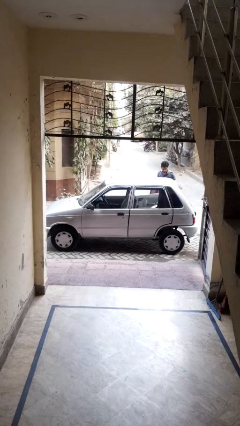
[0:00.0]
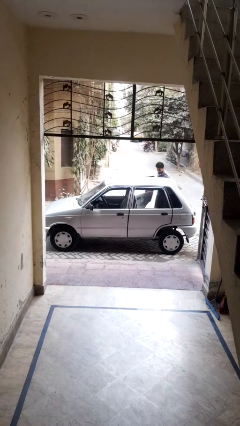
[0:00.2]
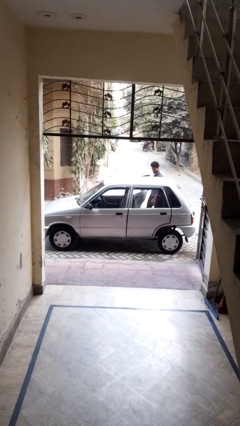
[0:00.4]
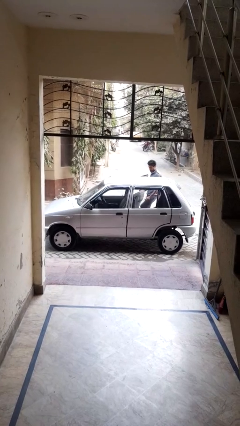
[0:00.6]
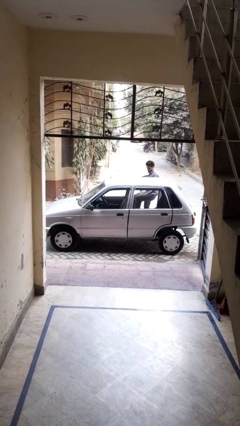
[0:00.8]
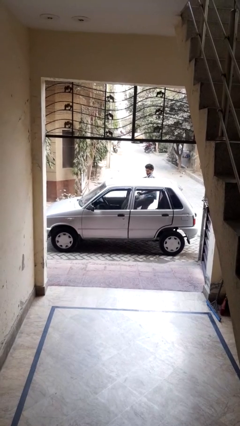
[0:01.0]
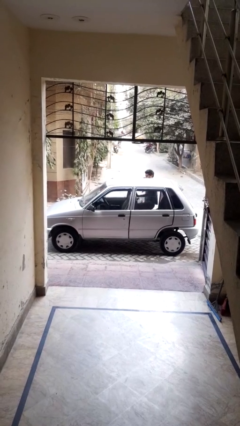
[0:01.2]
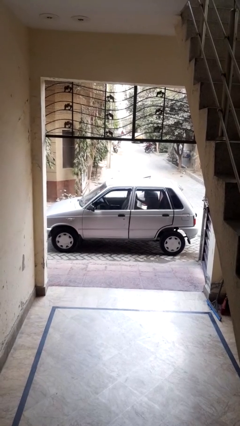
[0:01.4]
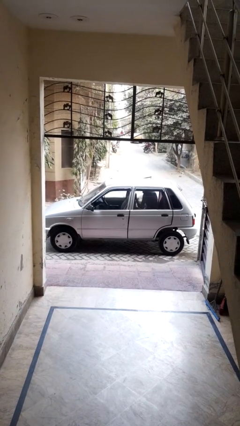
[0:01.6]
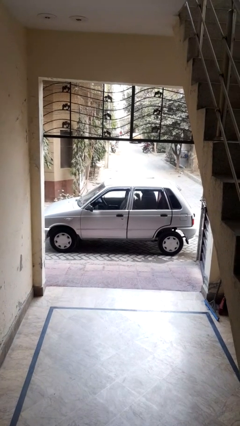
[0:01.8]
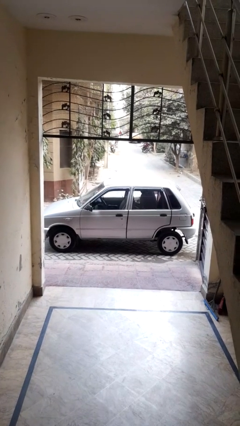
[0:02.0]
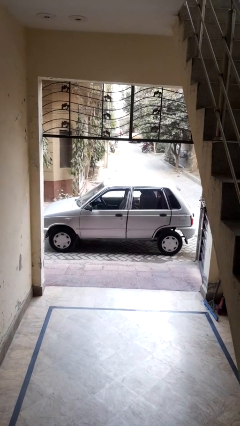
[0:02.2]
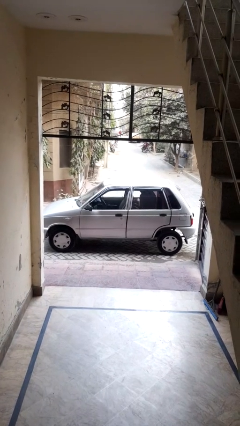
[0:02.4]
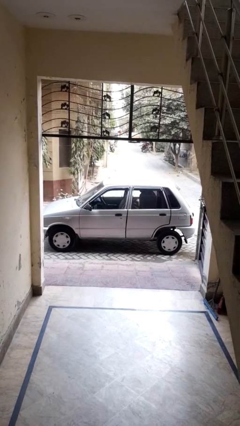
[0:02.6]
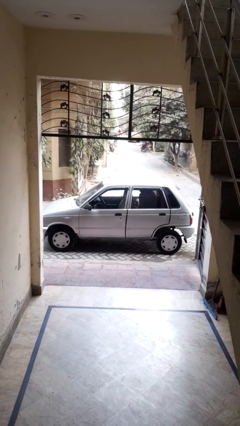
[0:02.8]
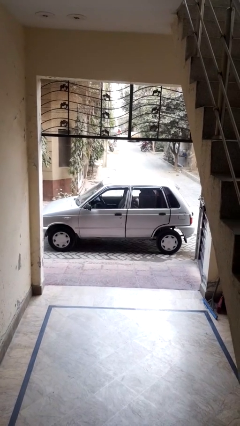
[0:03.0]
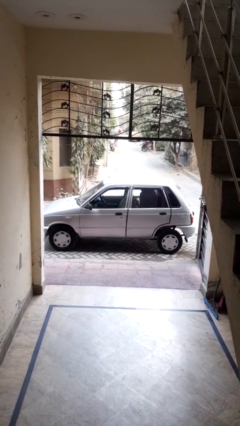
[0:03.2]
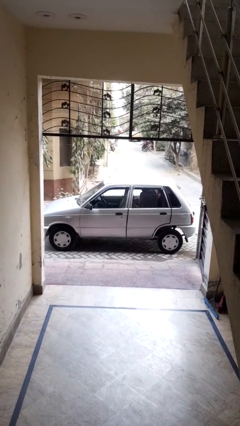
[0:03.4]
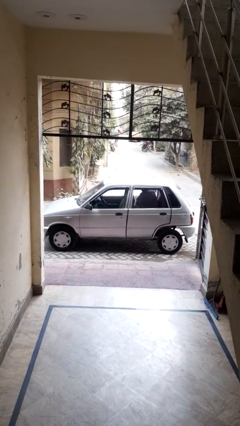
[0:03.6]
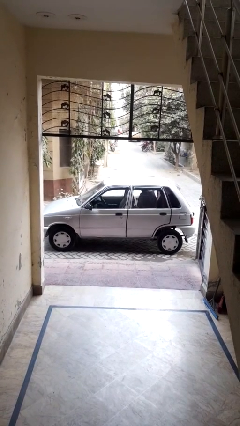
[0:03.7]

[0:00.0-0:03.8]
car picks up person

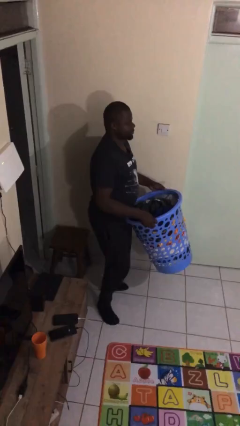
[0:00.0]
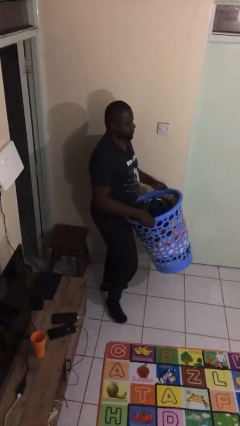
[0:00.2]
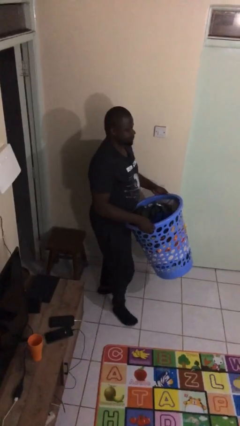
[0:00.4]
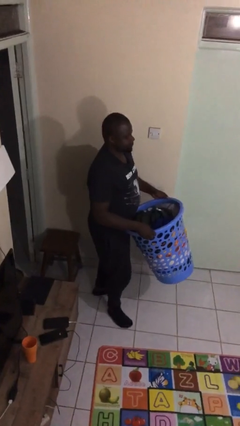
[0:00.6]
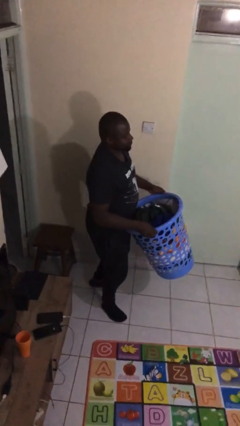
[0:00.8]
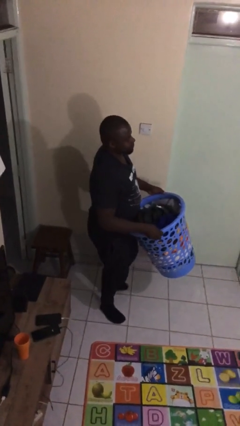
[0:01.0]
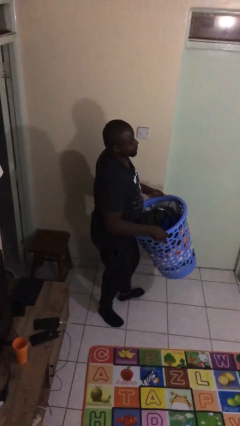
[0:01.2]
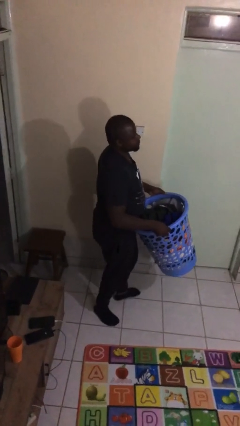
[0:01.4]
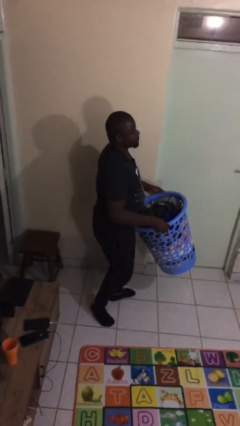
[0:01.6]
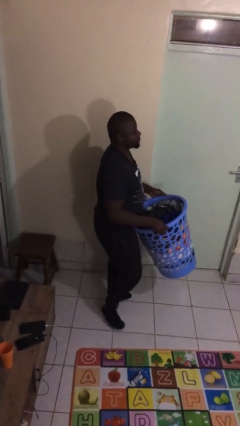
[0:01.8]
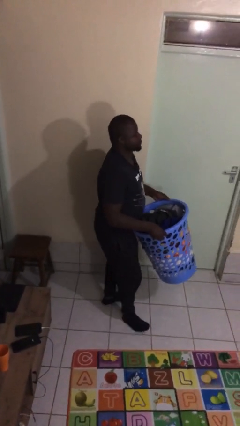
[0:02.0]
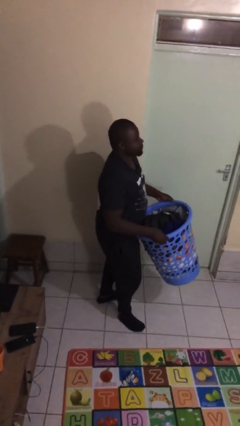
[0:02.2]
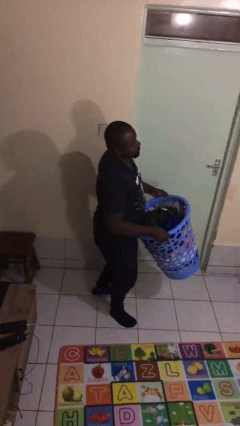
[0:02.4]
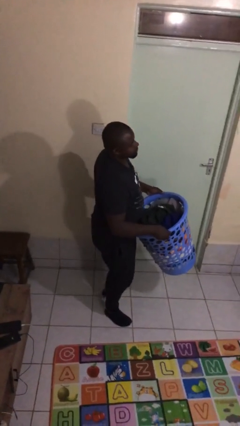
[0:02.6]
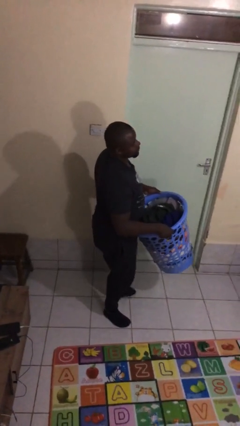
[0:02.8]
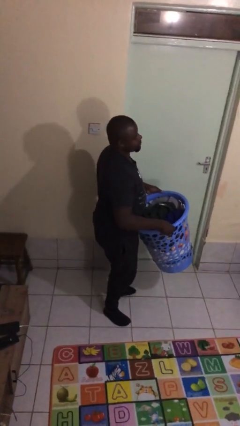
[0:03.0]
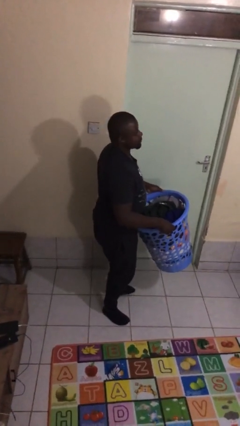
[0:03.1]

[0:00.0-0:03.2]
person carries laundry basket

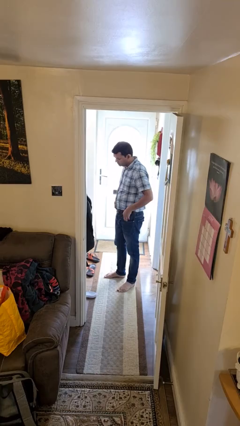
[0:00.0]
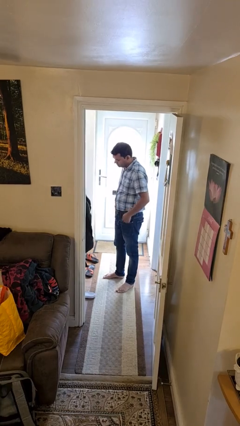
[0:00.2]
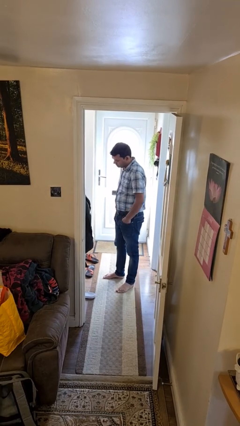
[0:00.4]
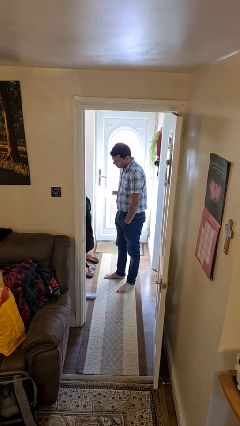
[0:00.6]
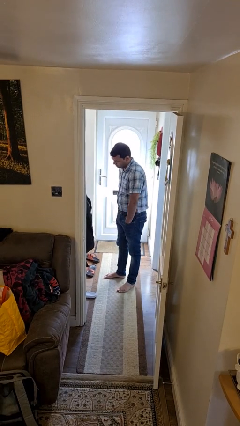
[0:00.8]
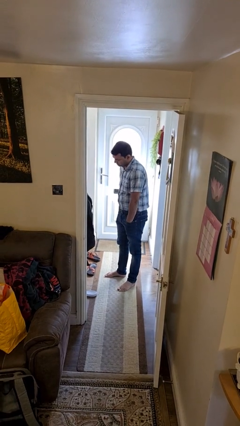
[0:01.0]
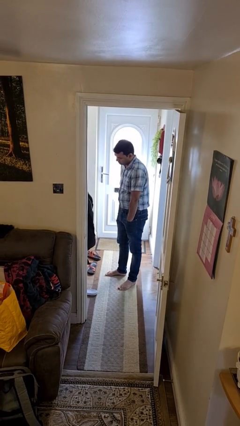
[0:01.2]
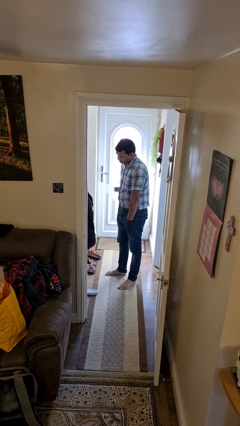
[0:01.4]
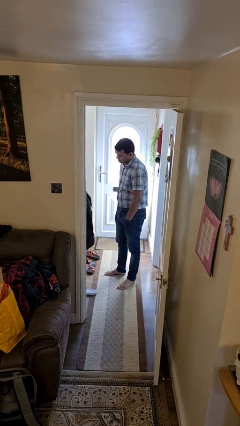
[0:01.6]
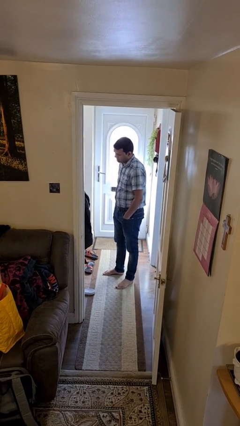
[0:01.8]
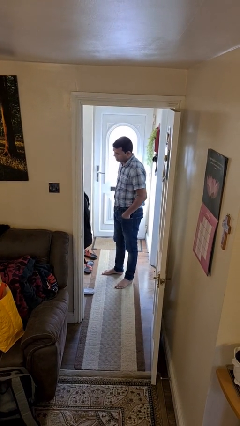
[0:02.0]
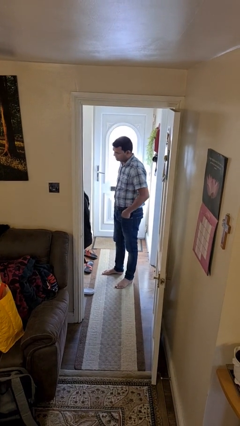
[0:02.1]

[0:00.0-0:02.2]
person puts hands in back pockets

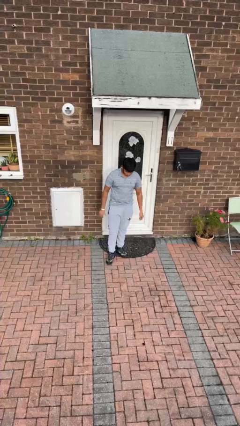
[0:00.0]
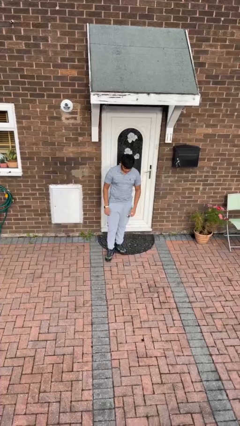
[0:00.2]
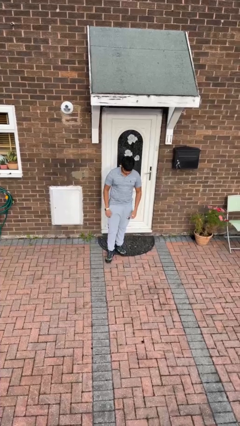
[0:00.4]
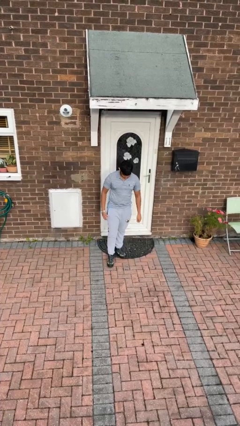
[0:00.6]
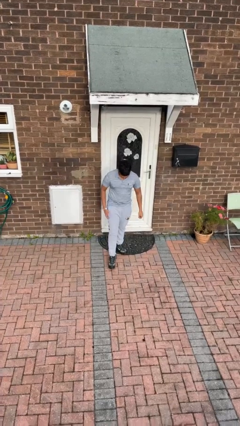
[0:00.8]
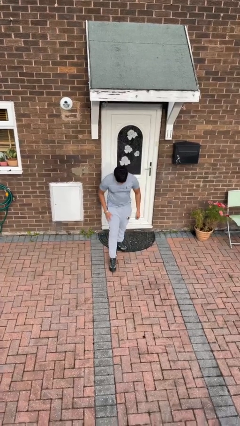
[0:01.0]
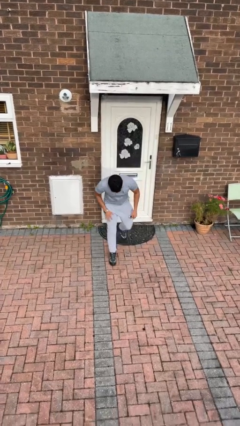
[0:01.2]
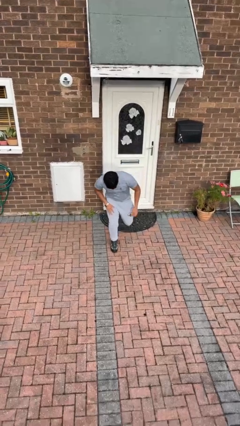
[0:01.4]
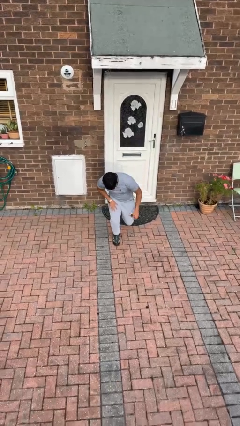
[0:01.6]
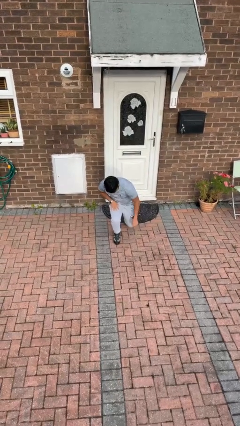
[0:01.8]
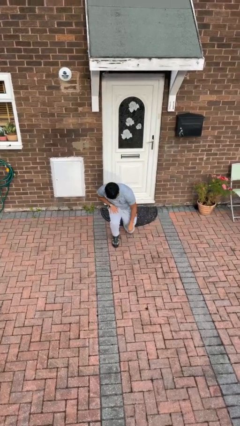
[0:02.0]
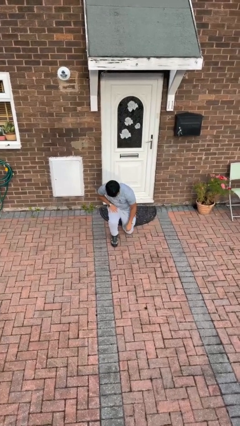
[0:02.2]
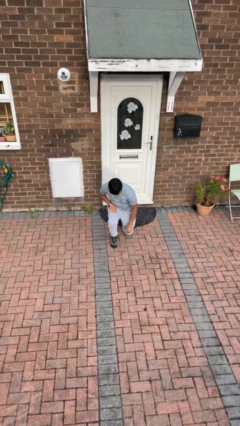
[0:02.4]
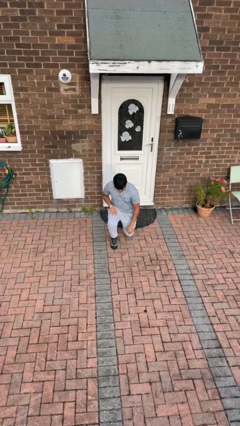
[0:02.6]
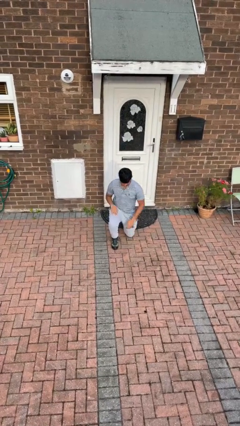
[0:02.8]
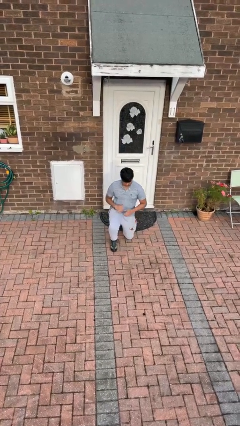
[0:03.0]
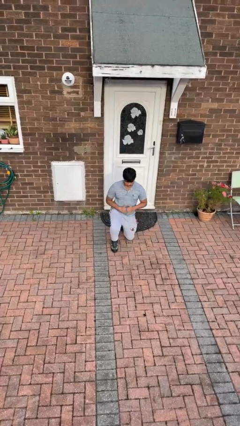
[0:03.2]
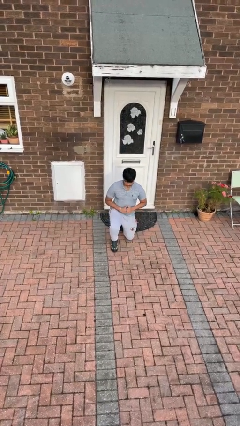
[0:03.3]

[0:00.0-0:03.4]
person kneels

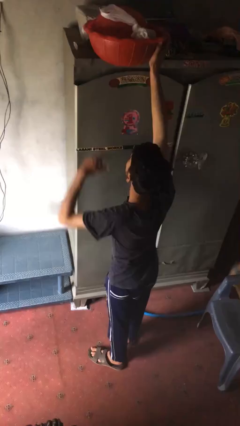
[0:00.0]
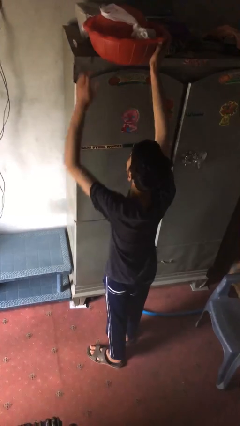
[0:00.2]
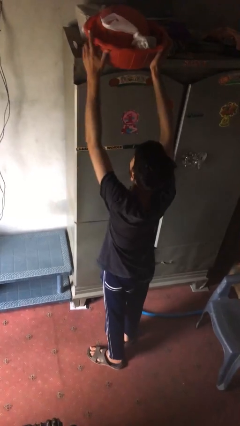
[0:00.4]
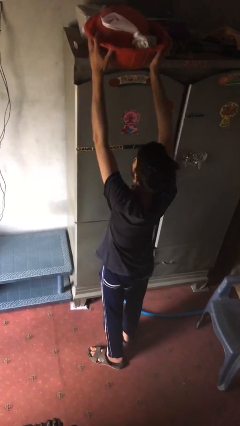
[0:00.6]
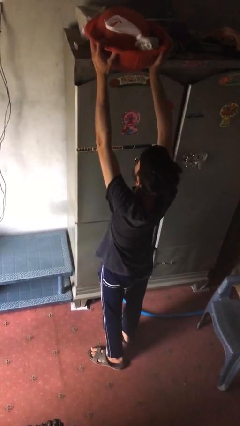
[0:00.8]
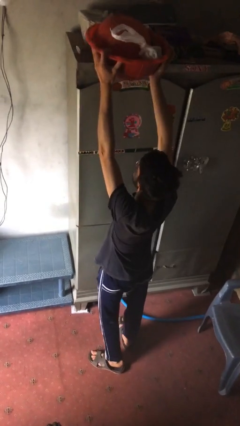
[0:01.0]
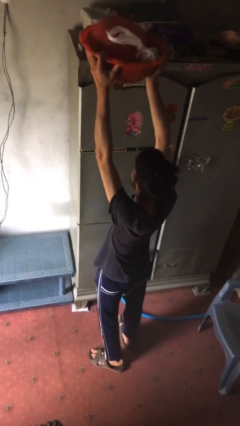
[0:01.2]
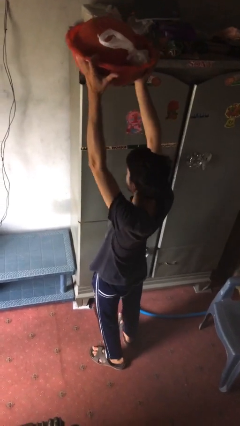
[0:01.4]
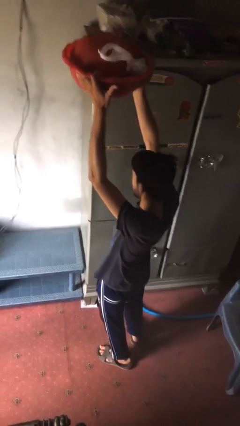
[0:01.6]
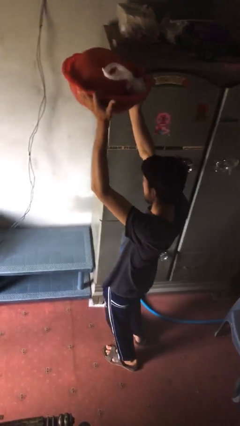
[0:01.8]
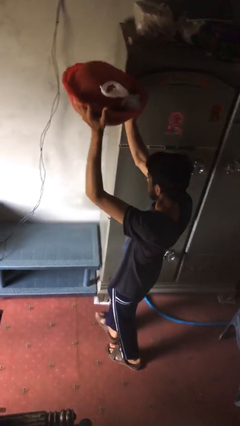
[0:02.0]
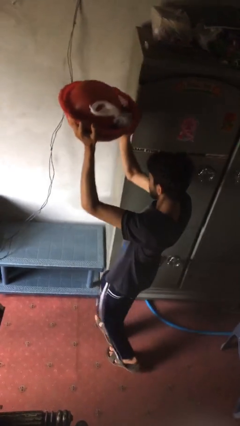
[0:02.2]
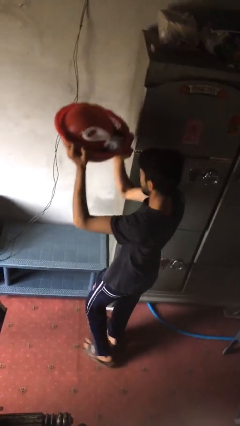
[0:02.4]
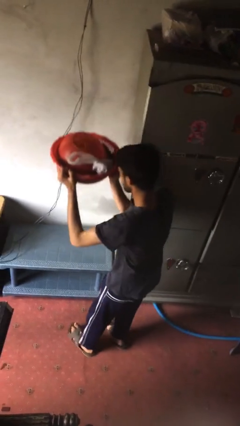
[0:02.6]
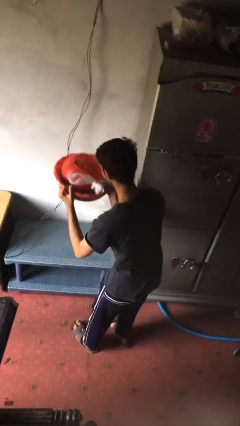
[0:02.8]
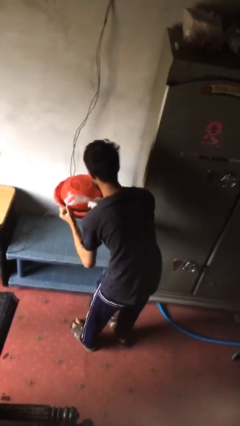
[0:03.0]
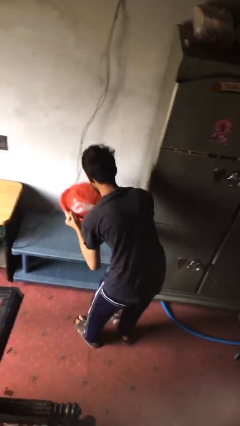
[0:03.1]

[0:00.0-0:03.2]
person picks up object from shelf

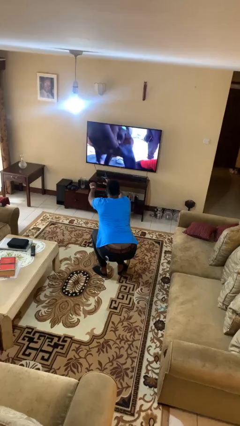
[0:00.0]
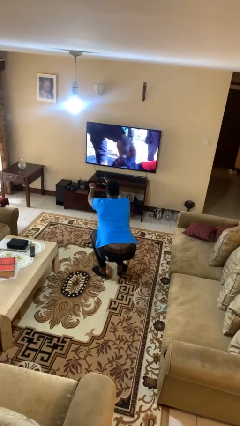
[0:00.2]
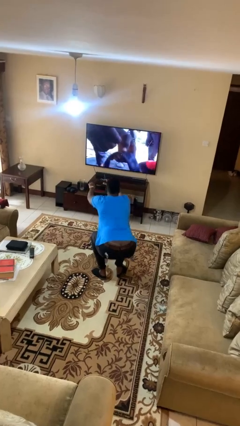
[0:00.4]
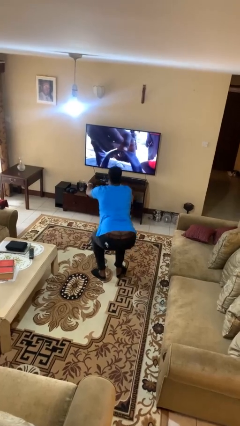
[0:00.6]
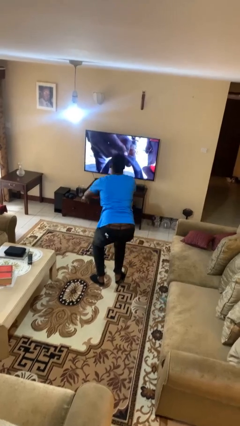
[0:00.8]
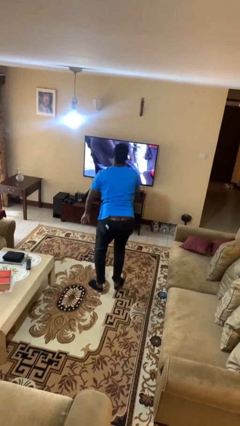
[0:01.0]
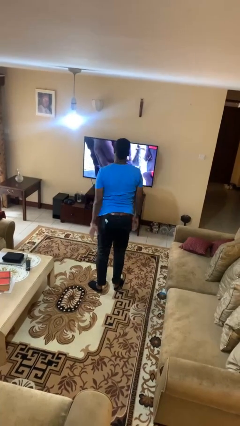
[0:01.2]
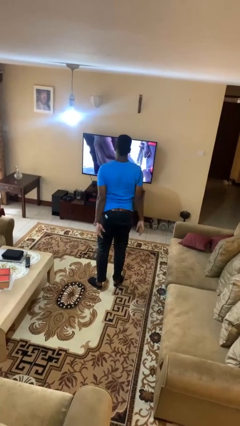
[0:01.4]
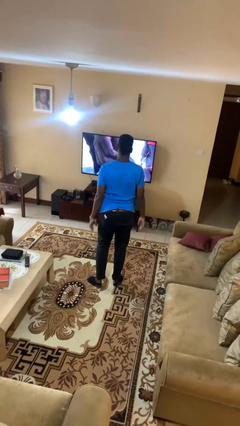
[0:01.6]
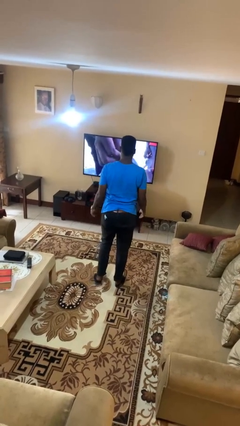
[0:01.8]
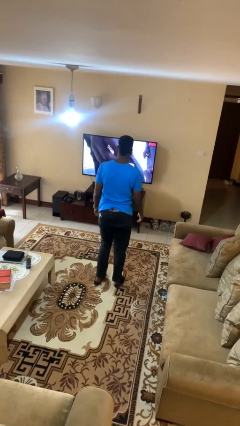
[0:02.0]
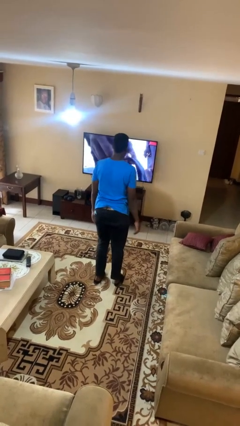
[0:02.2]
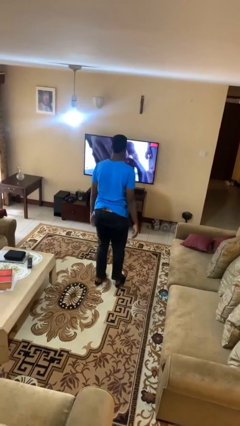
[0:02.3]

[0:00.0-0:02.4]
person stands up
